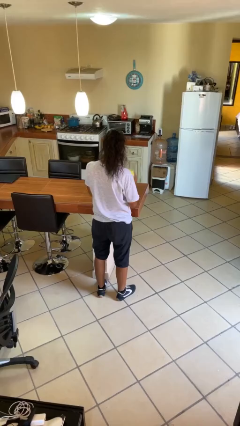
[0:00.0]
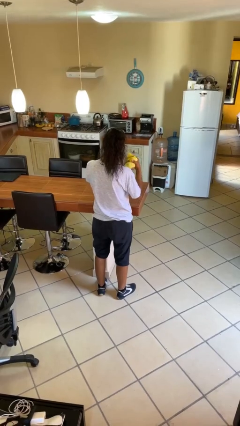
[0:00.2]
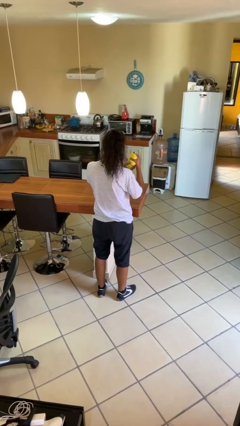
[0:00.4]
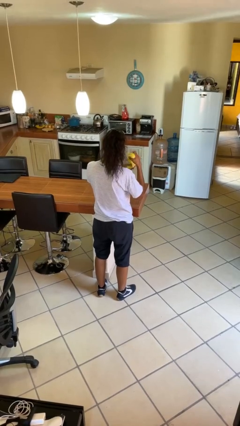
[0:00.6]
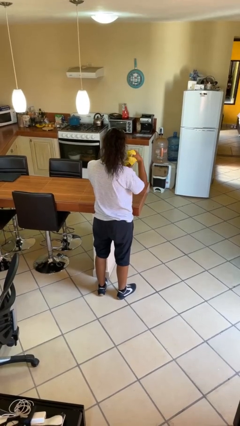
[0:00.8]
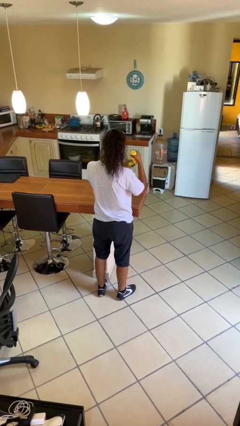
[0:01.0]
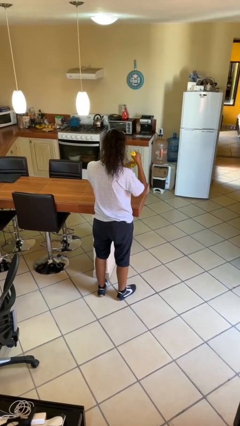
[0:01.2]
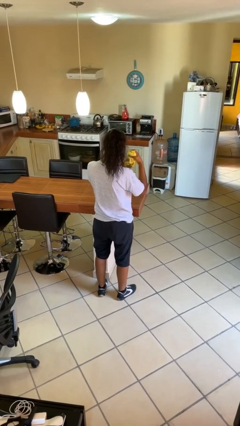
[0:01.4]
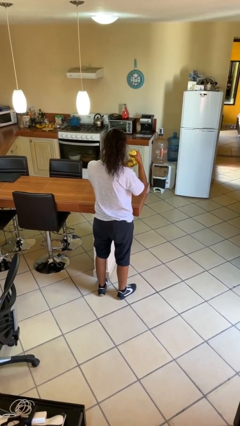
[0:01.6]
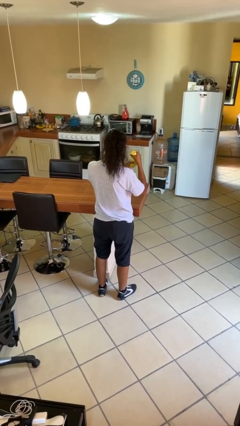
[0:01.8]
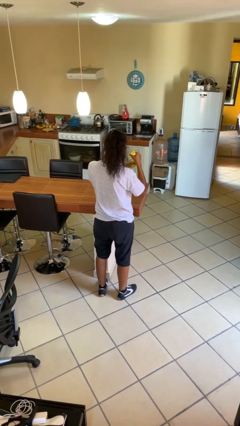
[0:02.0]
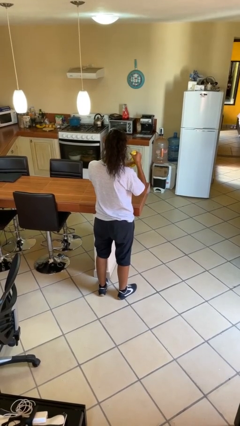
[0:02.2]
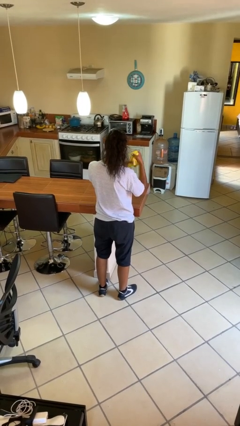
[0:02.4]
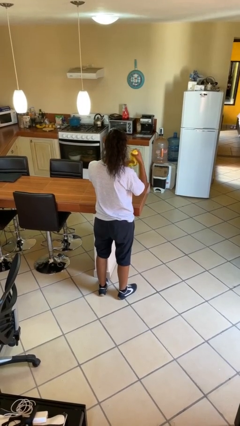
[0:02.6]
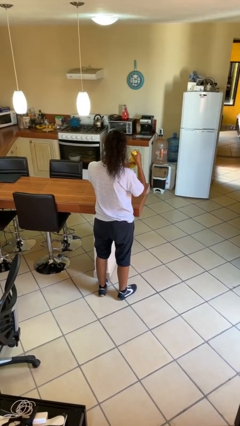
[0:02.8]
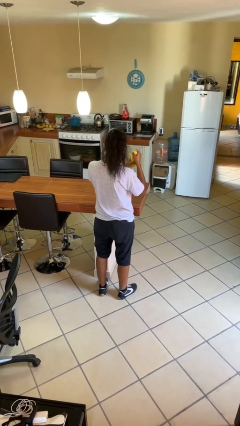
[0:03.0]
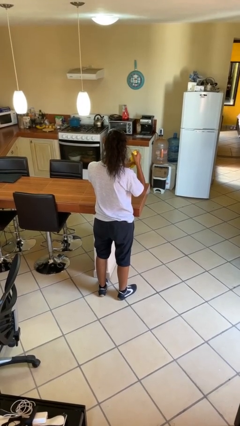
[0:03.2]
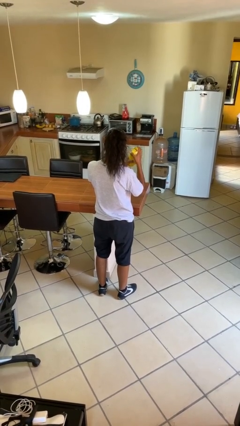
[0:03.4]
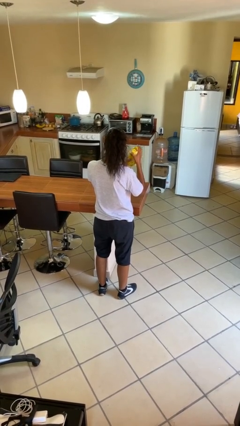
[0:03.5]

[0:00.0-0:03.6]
person squeezes object

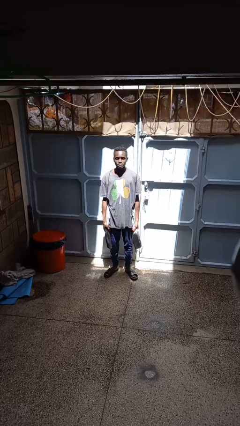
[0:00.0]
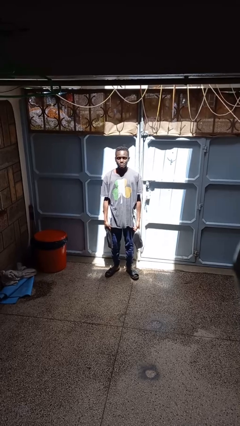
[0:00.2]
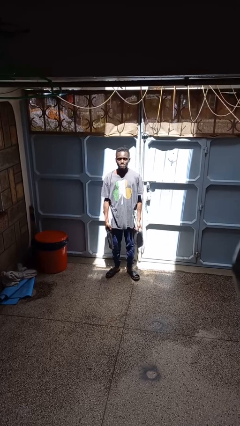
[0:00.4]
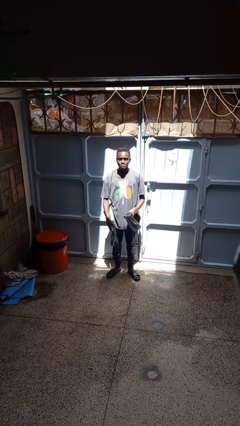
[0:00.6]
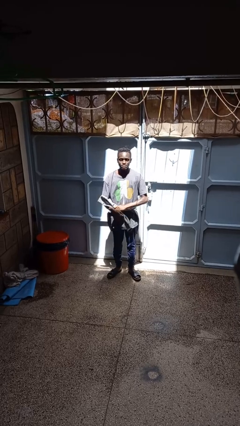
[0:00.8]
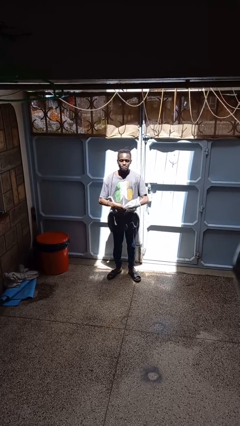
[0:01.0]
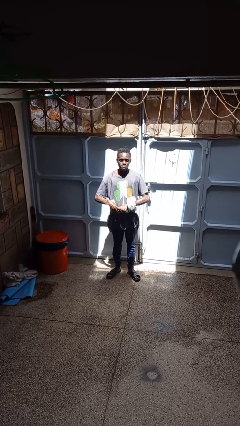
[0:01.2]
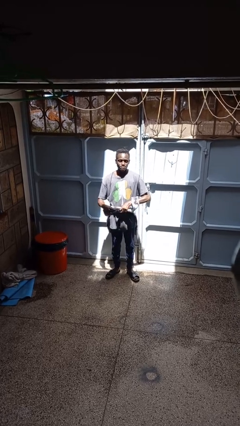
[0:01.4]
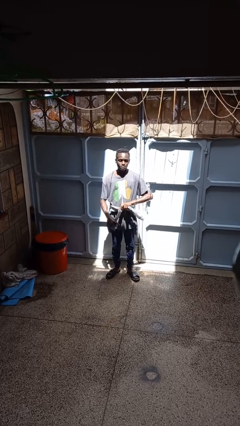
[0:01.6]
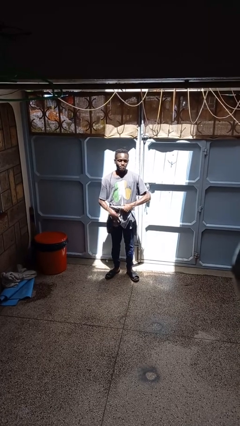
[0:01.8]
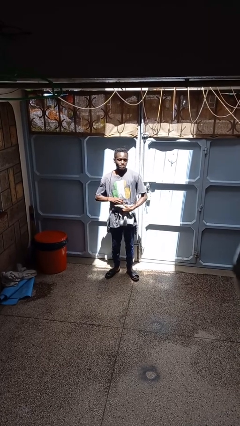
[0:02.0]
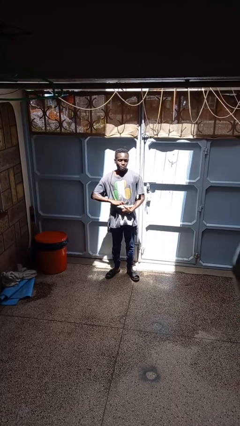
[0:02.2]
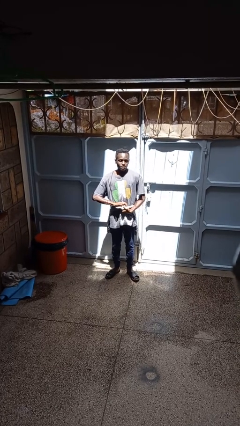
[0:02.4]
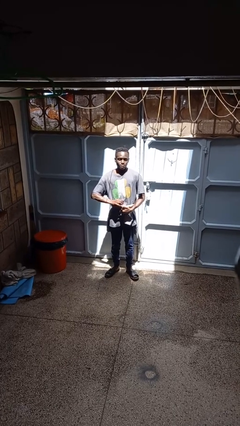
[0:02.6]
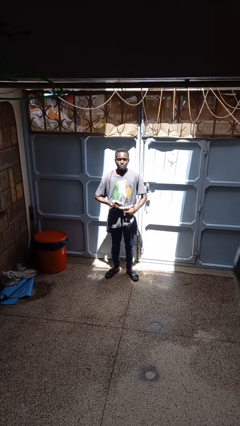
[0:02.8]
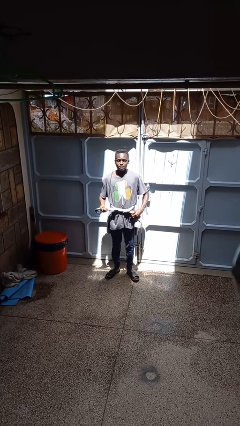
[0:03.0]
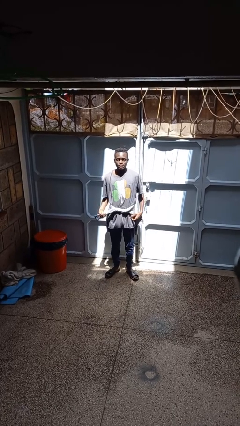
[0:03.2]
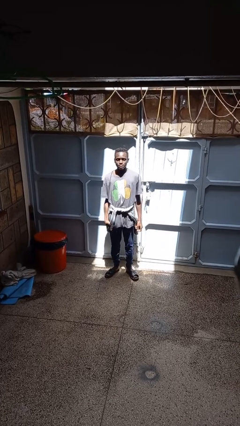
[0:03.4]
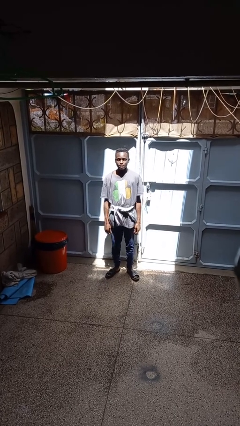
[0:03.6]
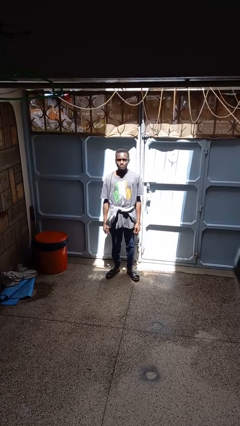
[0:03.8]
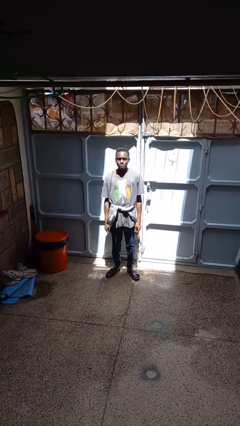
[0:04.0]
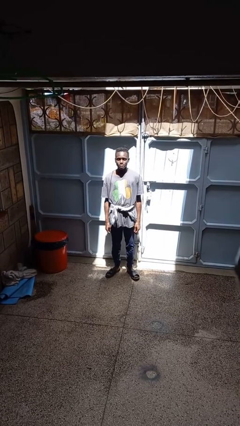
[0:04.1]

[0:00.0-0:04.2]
person ties jacket around waist

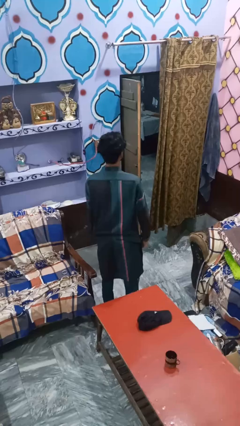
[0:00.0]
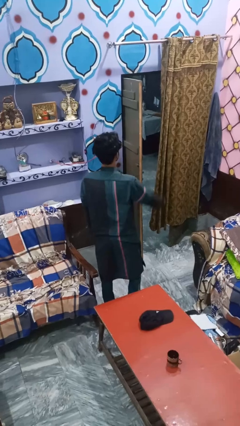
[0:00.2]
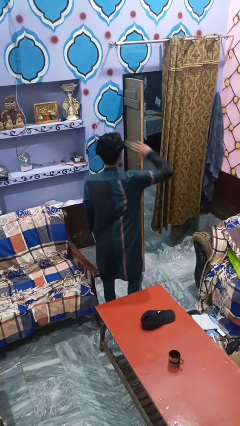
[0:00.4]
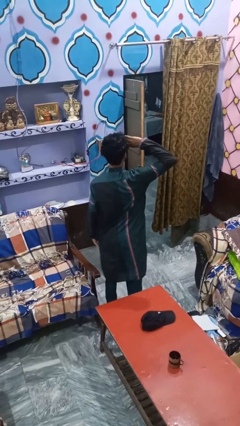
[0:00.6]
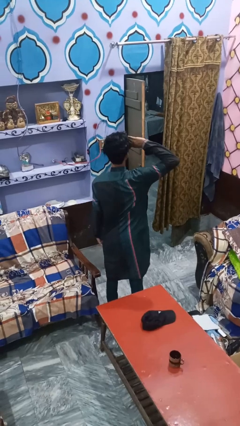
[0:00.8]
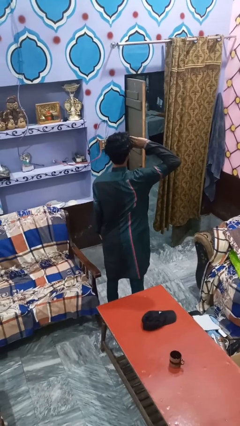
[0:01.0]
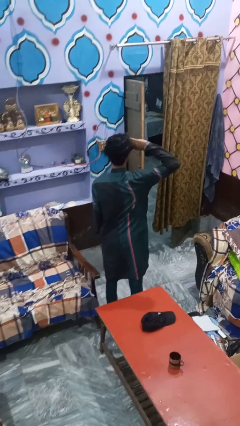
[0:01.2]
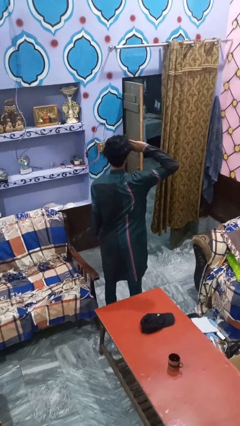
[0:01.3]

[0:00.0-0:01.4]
person salutes

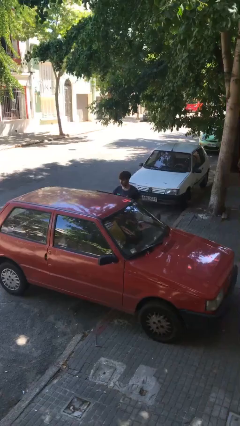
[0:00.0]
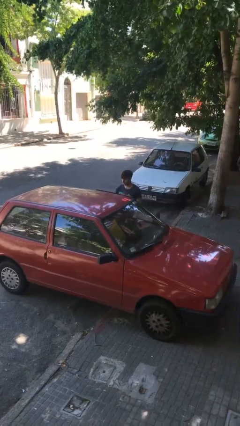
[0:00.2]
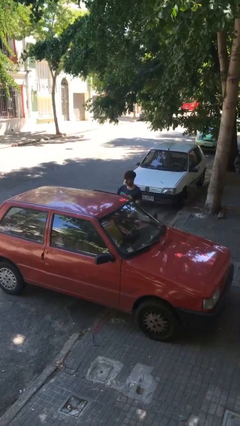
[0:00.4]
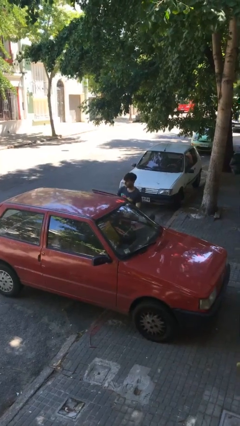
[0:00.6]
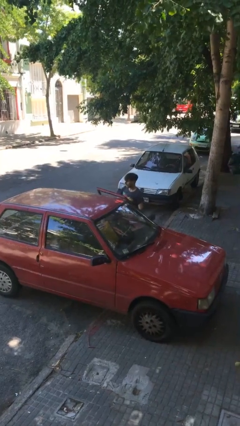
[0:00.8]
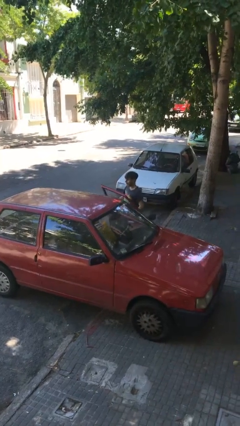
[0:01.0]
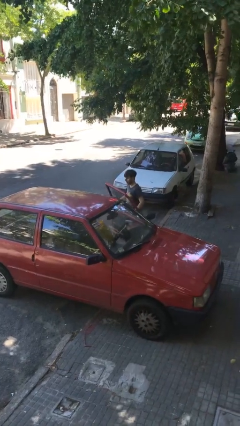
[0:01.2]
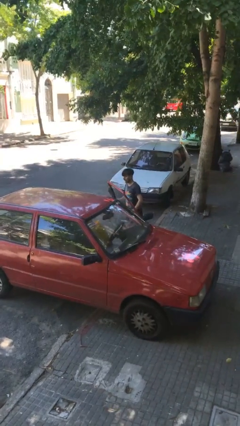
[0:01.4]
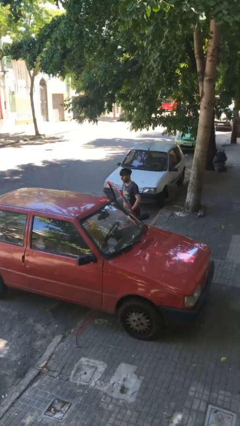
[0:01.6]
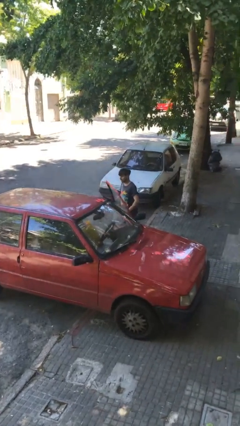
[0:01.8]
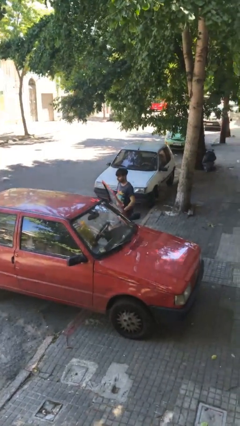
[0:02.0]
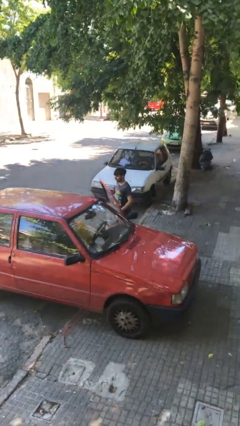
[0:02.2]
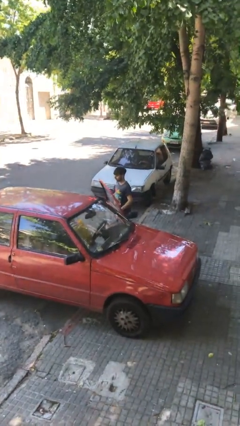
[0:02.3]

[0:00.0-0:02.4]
person opens car door

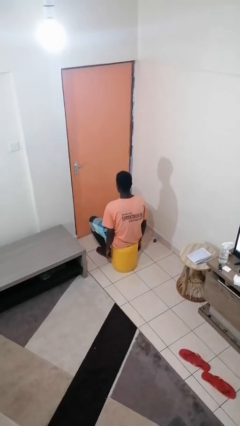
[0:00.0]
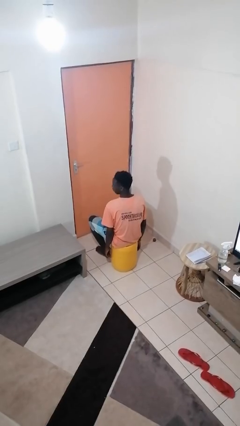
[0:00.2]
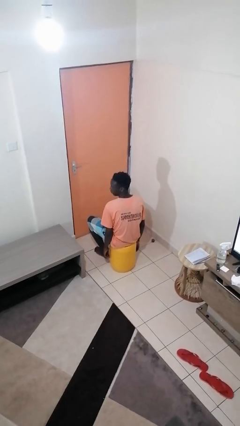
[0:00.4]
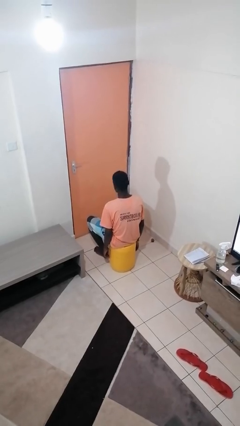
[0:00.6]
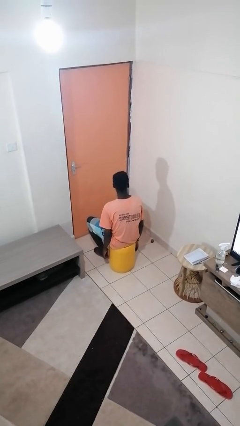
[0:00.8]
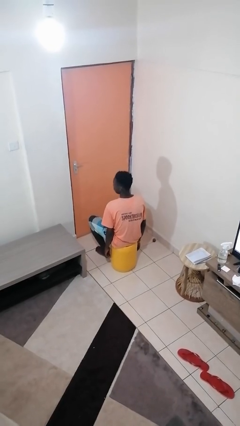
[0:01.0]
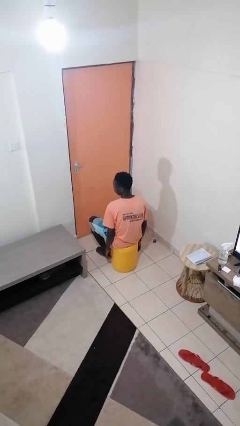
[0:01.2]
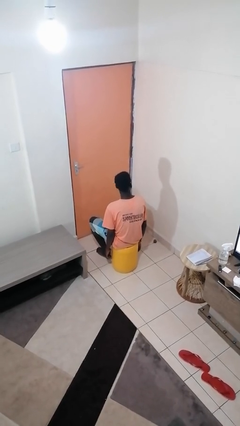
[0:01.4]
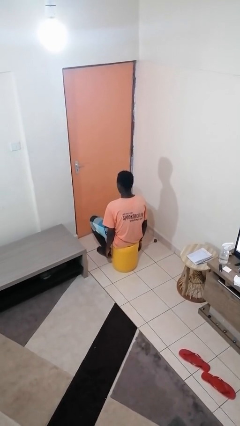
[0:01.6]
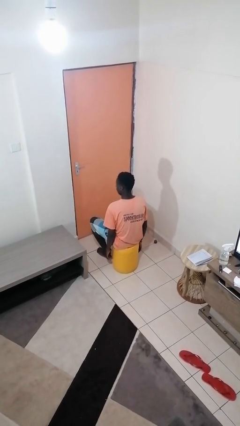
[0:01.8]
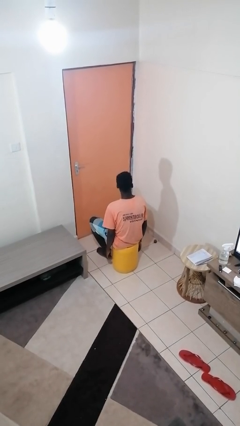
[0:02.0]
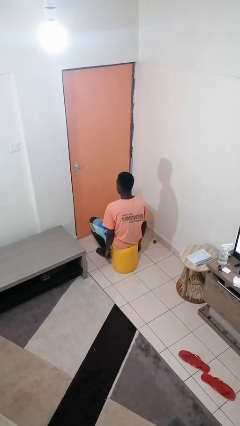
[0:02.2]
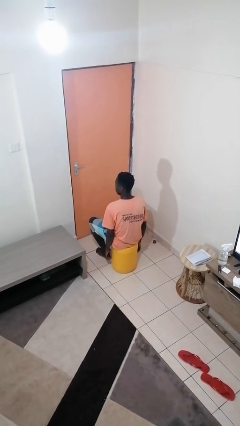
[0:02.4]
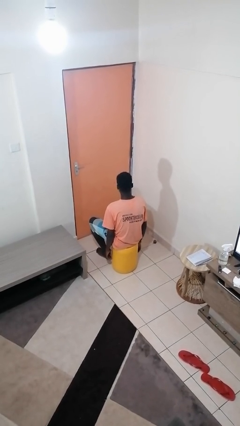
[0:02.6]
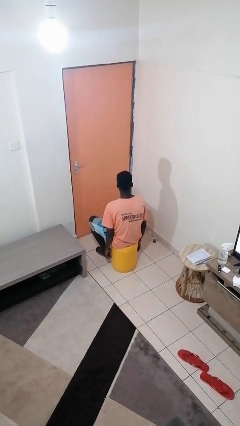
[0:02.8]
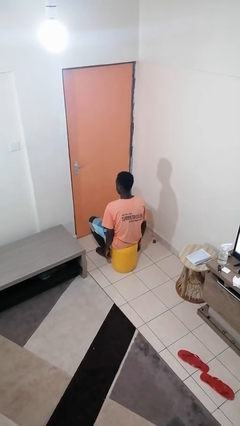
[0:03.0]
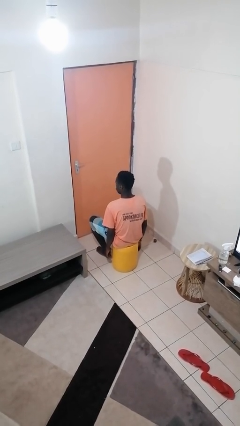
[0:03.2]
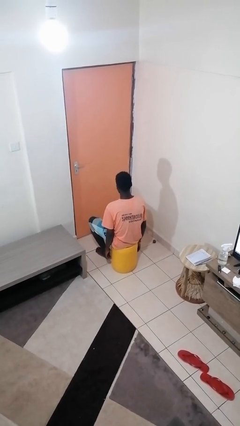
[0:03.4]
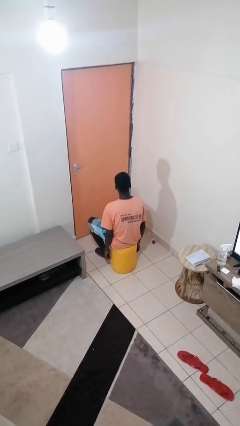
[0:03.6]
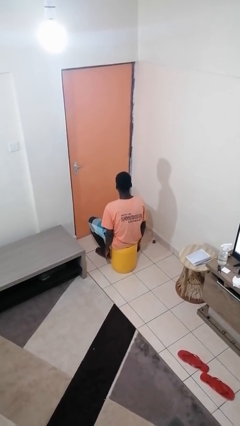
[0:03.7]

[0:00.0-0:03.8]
person shakes head

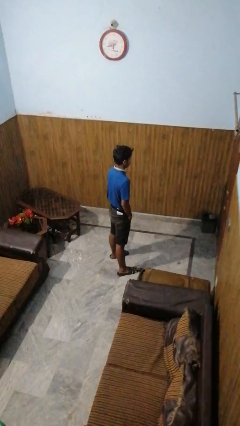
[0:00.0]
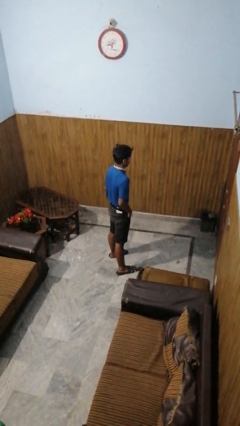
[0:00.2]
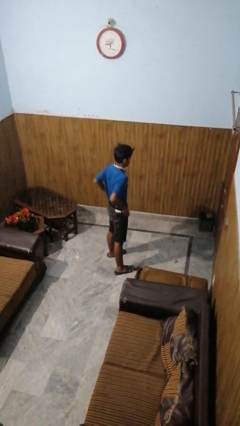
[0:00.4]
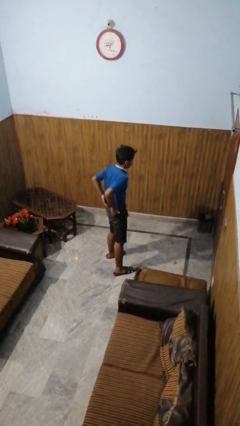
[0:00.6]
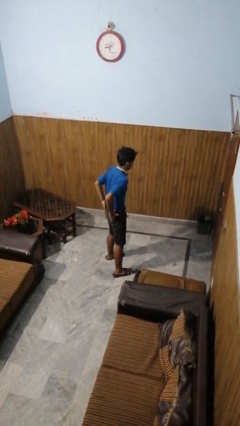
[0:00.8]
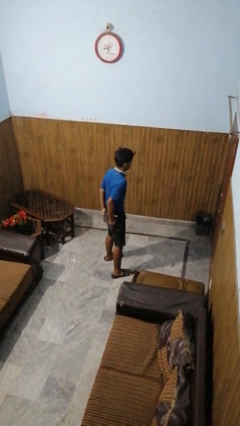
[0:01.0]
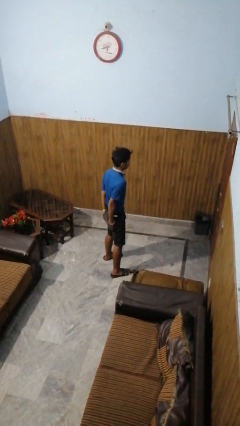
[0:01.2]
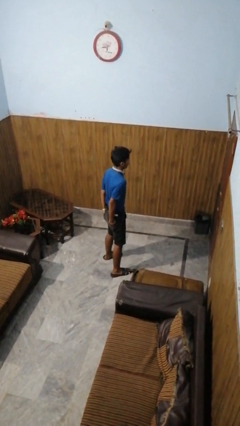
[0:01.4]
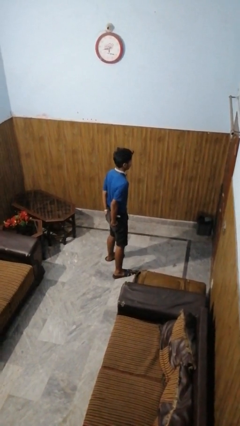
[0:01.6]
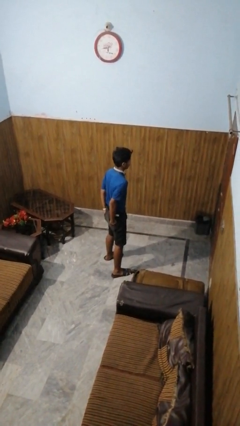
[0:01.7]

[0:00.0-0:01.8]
person puts hands in back pockets

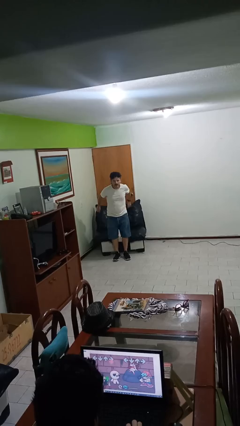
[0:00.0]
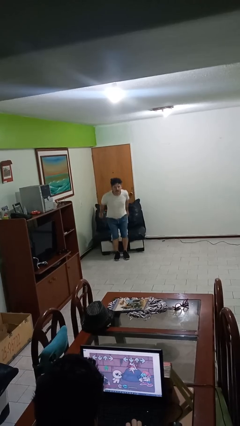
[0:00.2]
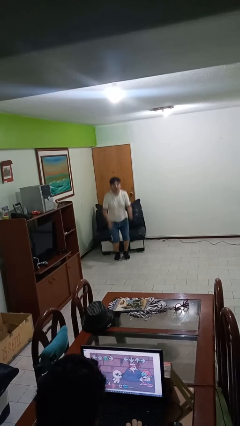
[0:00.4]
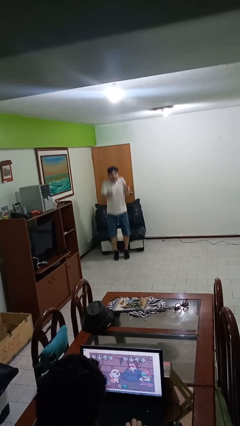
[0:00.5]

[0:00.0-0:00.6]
person jumps
